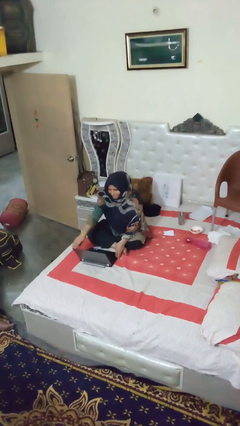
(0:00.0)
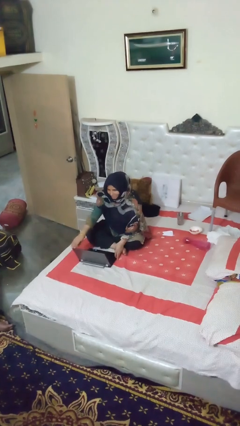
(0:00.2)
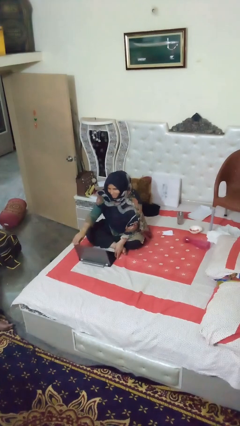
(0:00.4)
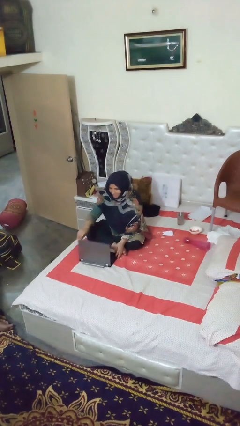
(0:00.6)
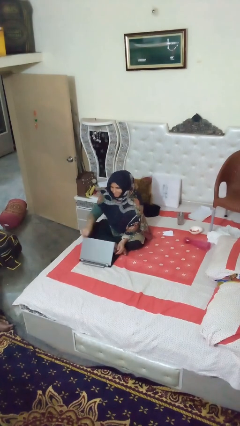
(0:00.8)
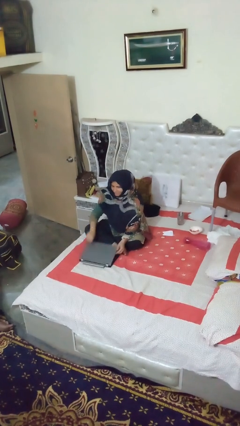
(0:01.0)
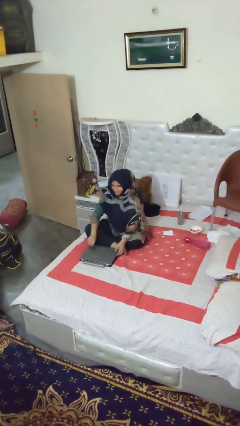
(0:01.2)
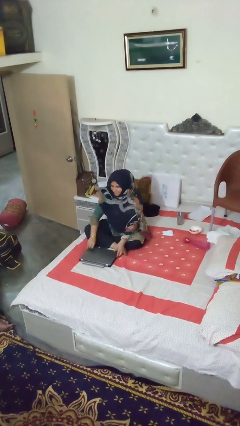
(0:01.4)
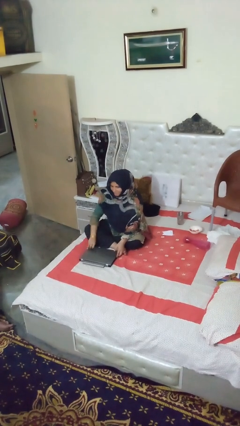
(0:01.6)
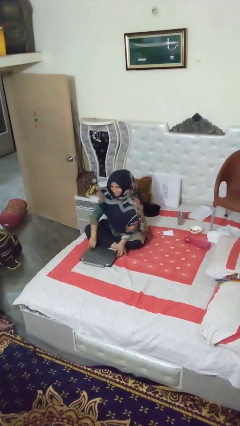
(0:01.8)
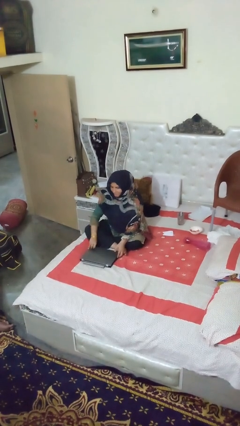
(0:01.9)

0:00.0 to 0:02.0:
person closes laptop

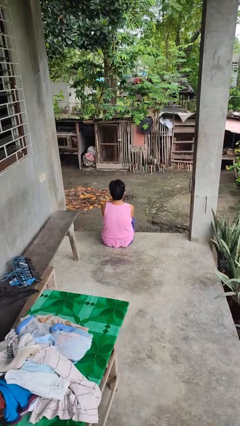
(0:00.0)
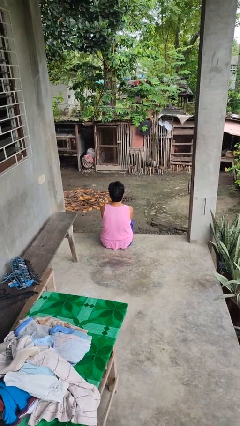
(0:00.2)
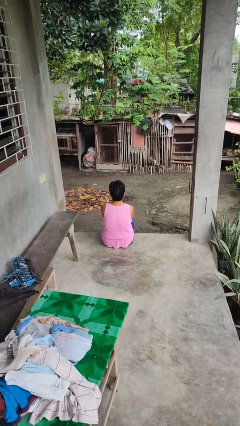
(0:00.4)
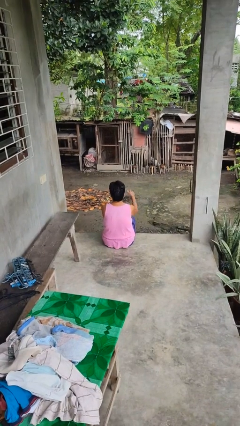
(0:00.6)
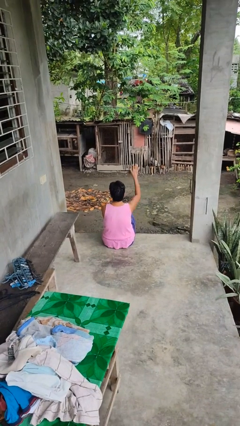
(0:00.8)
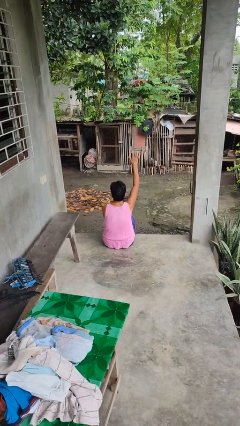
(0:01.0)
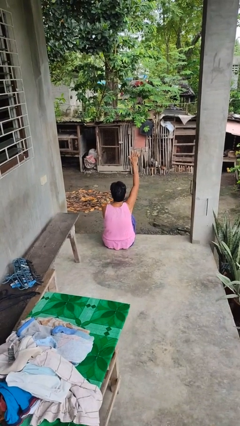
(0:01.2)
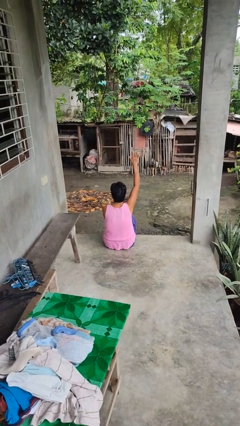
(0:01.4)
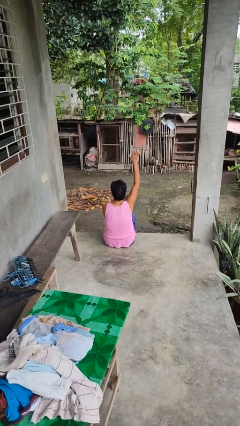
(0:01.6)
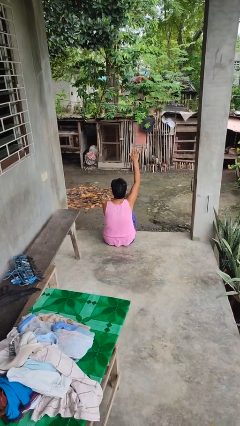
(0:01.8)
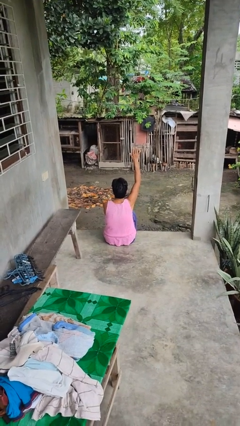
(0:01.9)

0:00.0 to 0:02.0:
person gestures raise hand

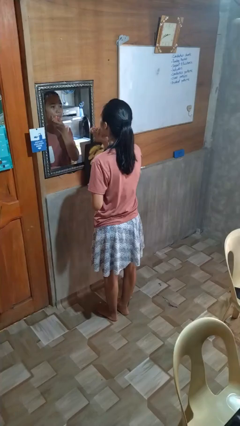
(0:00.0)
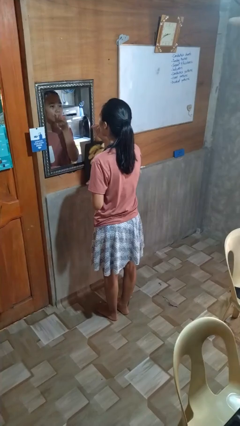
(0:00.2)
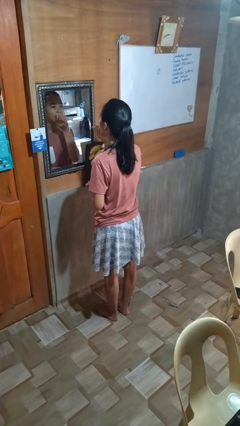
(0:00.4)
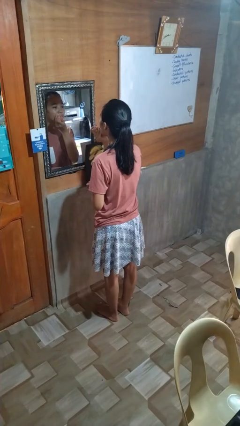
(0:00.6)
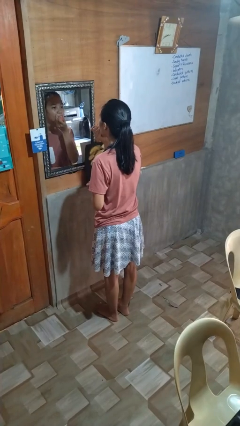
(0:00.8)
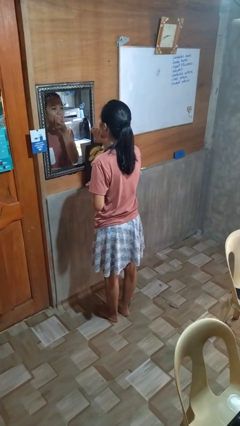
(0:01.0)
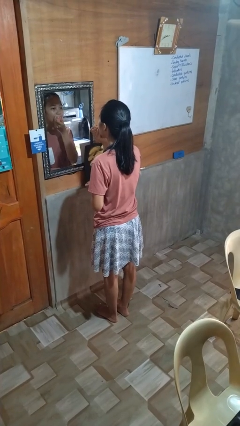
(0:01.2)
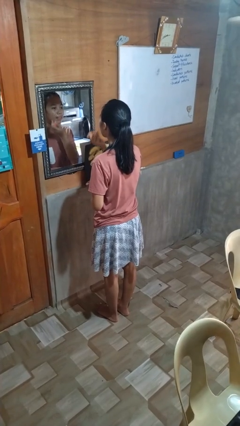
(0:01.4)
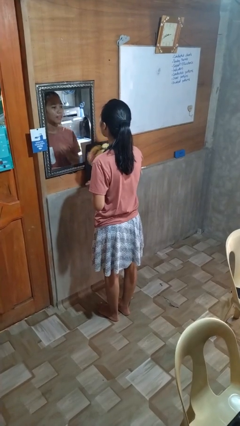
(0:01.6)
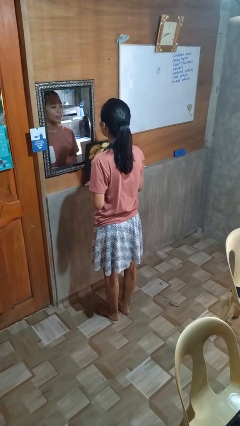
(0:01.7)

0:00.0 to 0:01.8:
person applies lip makeup

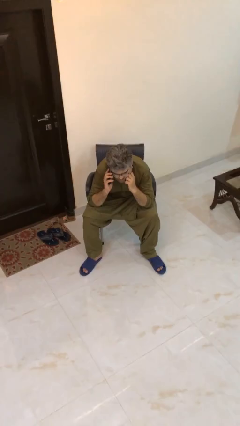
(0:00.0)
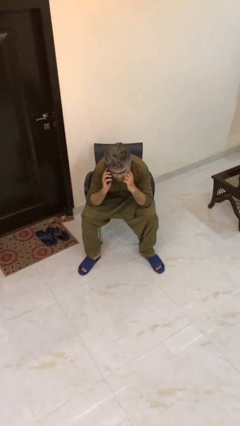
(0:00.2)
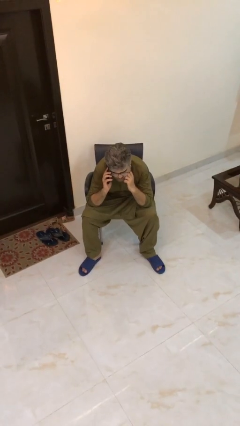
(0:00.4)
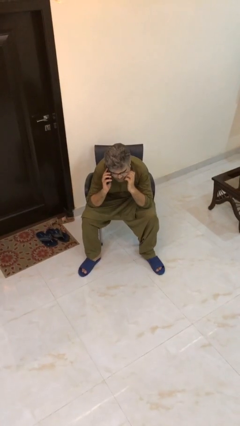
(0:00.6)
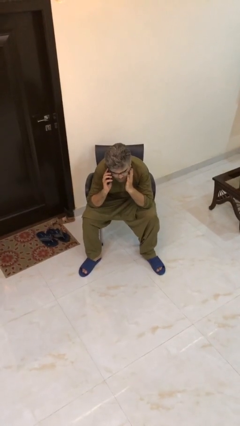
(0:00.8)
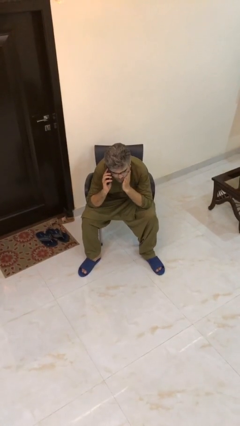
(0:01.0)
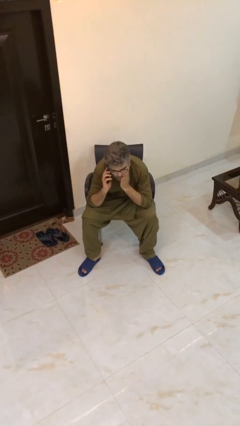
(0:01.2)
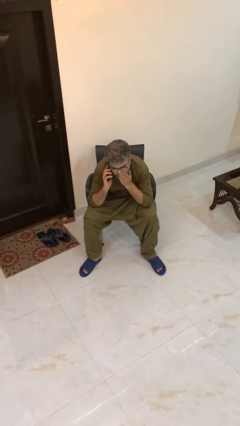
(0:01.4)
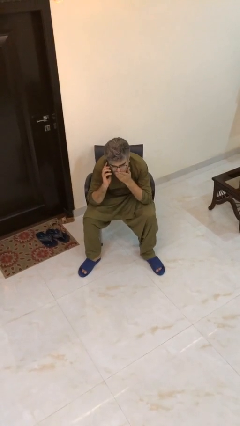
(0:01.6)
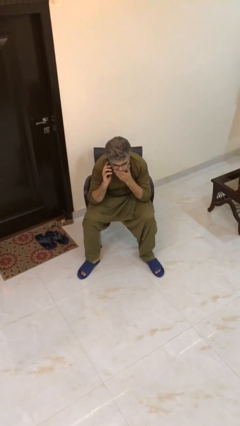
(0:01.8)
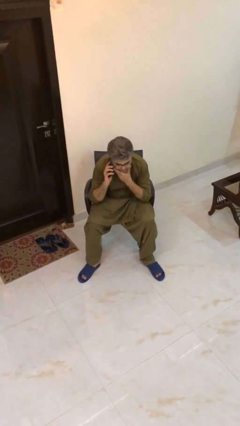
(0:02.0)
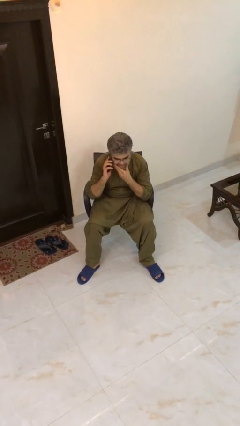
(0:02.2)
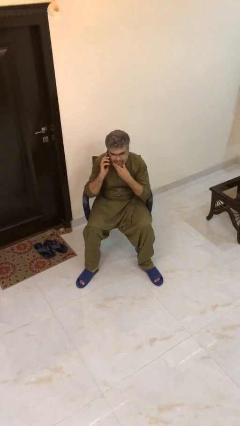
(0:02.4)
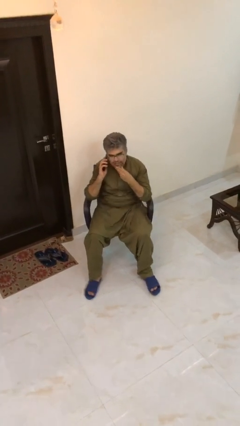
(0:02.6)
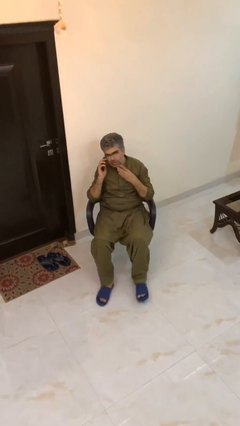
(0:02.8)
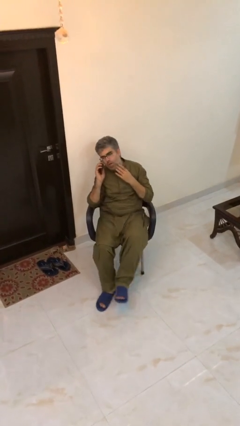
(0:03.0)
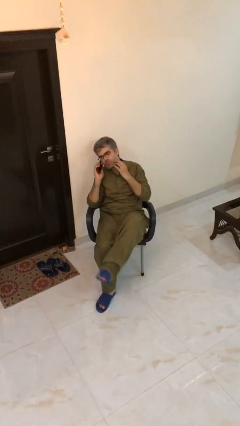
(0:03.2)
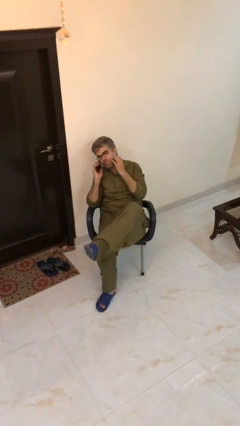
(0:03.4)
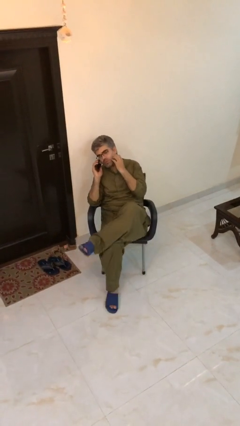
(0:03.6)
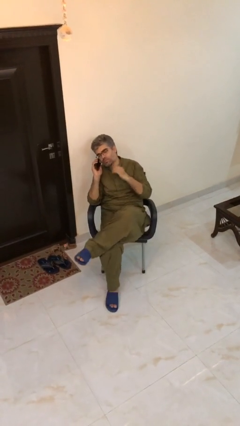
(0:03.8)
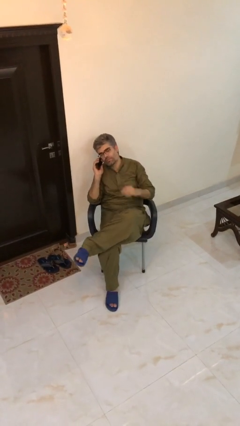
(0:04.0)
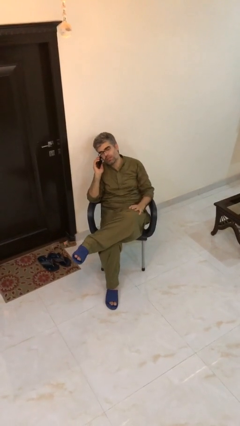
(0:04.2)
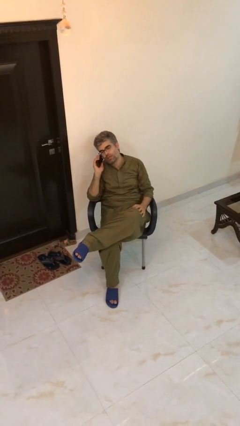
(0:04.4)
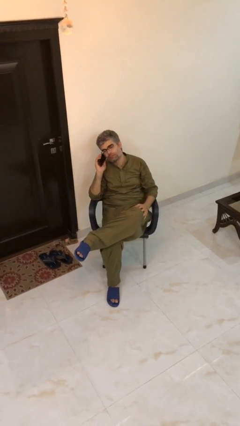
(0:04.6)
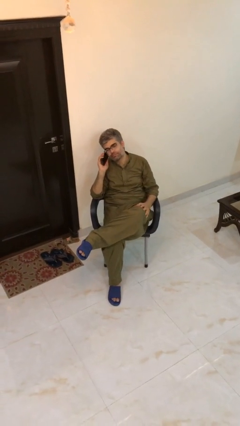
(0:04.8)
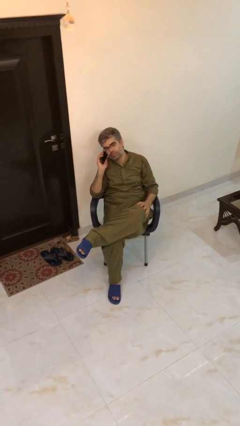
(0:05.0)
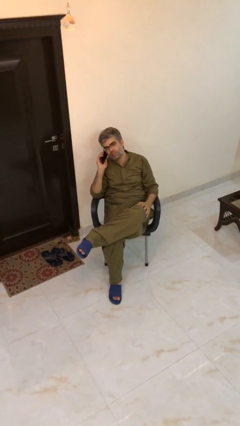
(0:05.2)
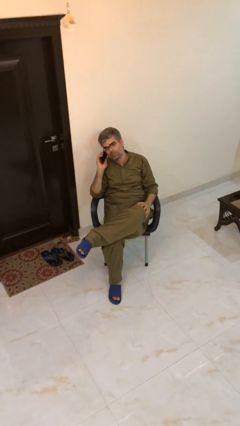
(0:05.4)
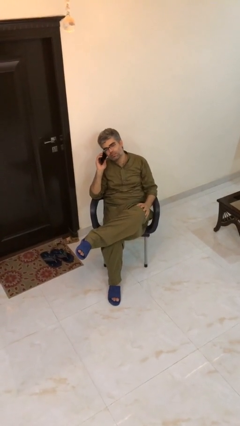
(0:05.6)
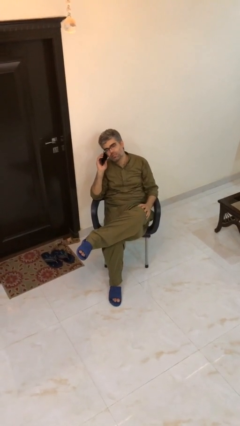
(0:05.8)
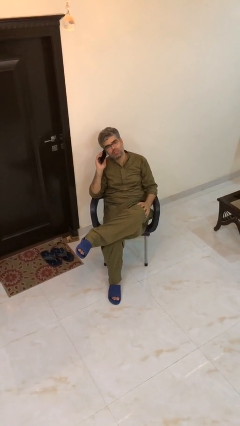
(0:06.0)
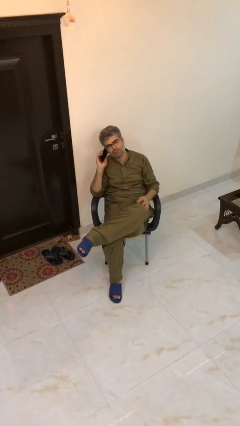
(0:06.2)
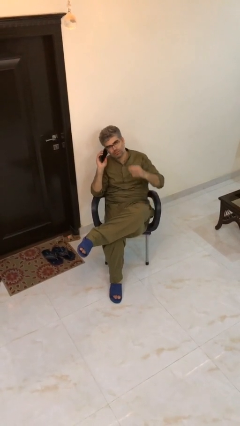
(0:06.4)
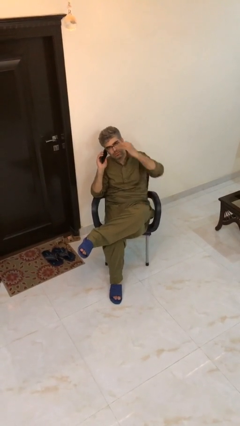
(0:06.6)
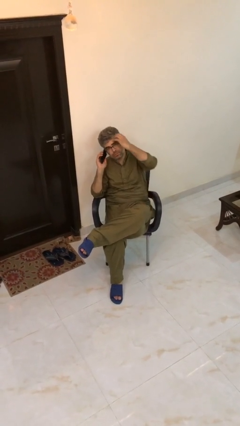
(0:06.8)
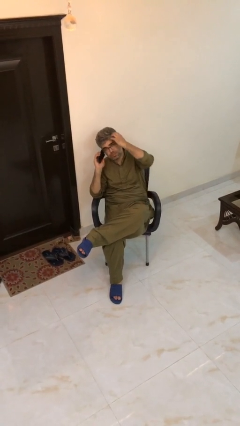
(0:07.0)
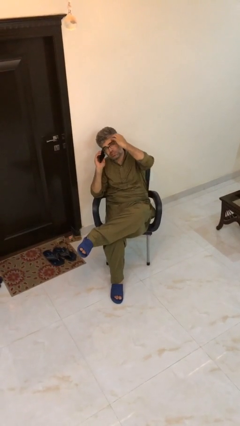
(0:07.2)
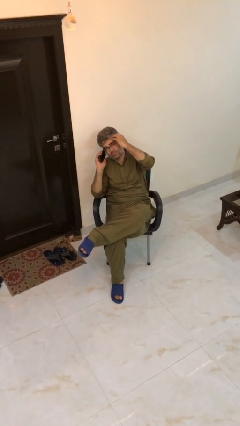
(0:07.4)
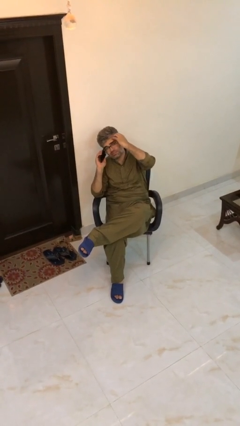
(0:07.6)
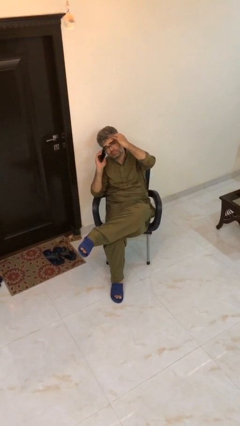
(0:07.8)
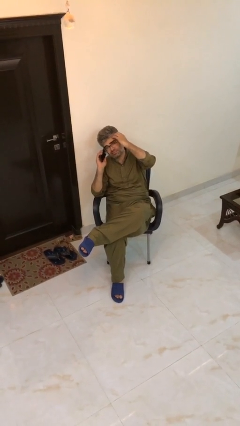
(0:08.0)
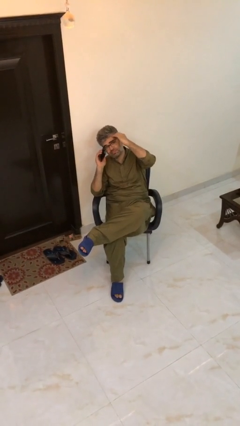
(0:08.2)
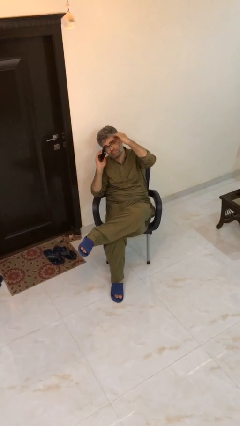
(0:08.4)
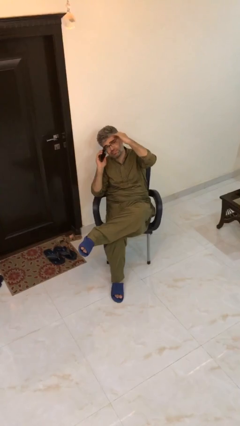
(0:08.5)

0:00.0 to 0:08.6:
person talks on phone

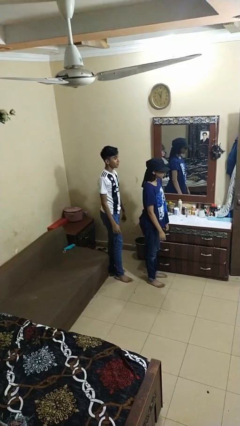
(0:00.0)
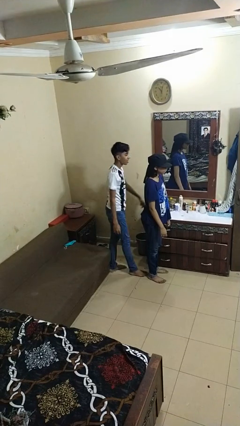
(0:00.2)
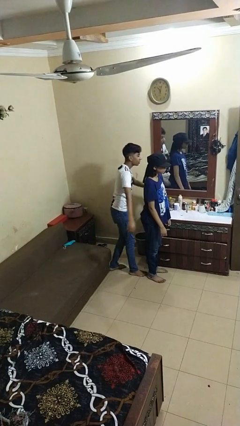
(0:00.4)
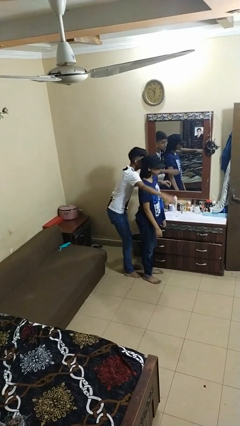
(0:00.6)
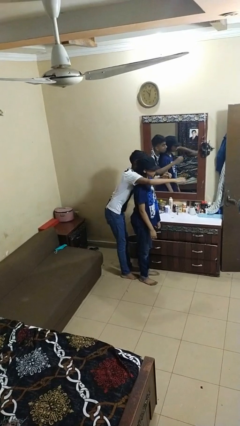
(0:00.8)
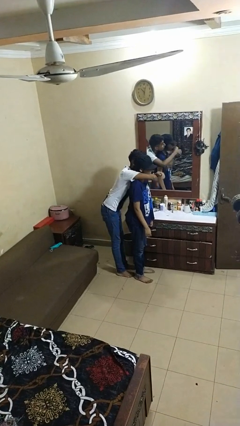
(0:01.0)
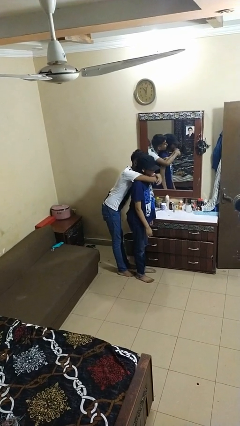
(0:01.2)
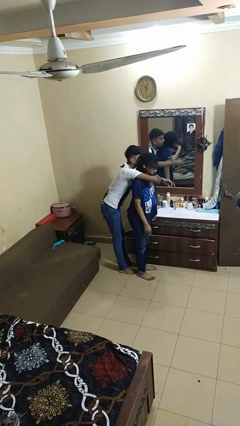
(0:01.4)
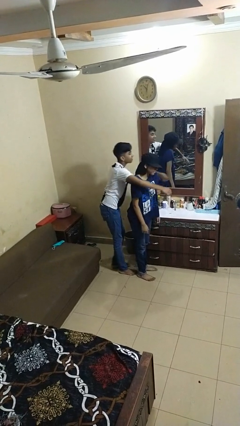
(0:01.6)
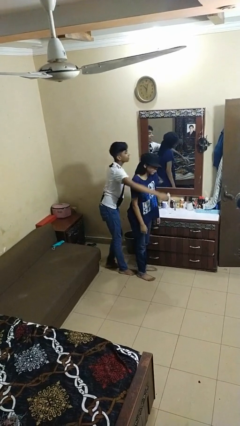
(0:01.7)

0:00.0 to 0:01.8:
person hugs person from behind

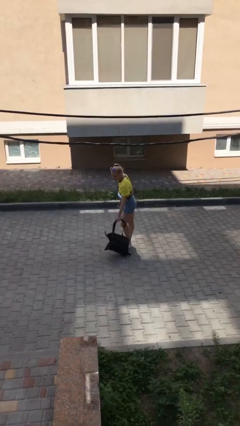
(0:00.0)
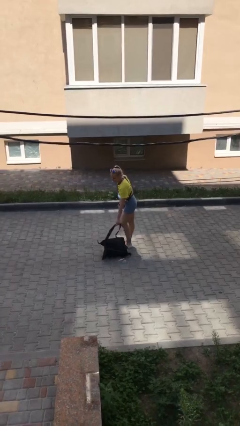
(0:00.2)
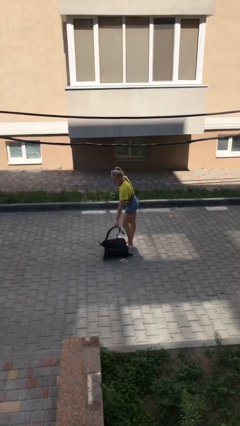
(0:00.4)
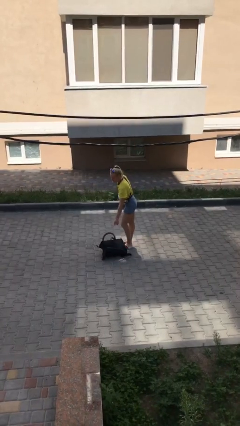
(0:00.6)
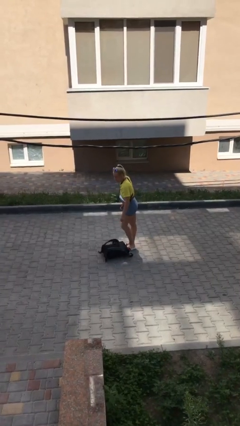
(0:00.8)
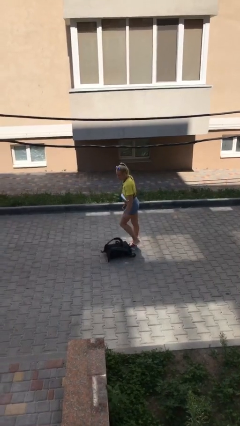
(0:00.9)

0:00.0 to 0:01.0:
person puts down object on floor

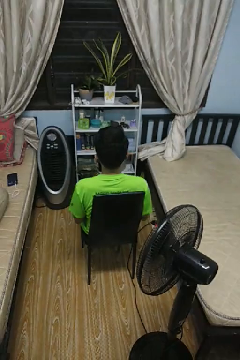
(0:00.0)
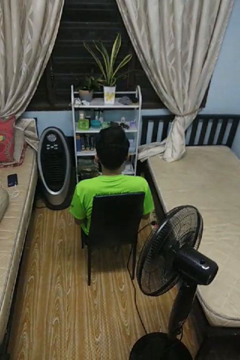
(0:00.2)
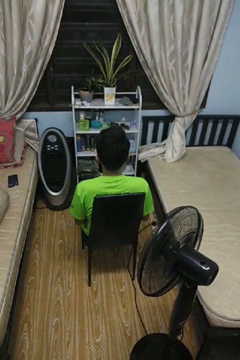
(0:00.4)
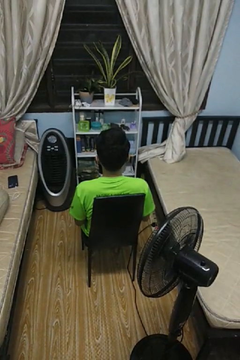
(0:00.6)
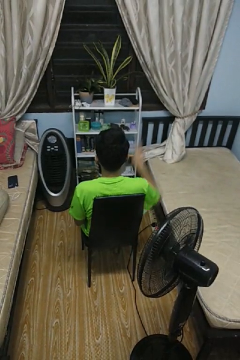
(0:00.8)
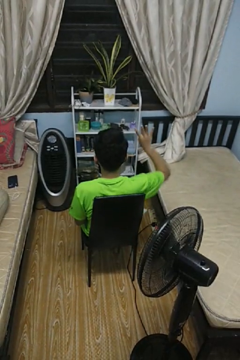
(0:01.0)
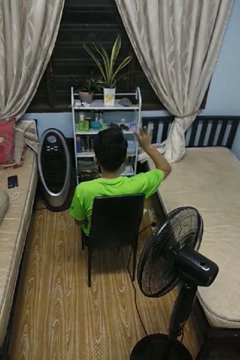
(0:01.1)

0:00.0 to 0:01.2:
person gestures number four
